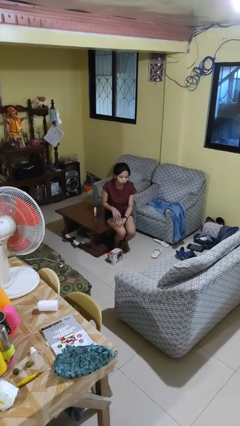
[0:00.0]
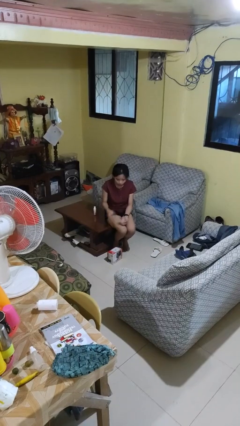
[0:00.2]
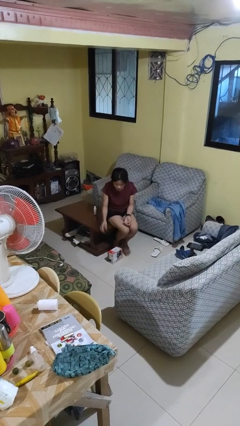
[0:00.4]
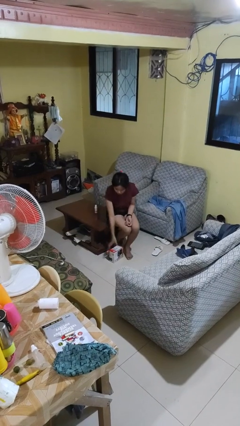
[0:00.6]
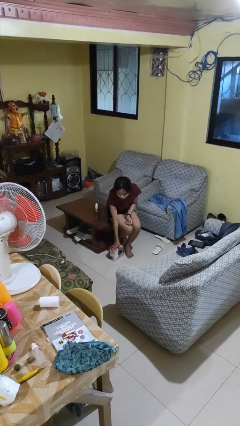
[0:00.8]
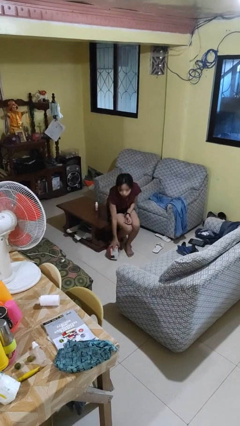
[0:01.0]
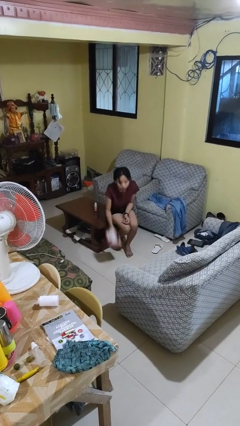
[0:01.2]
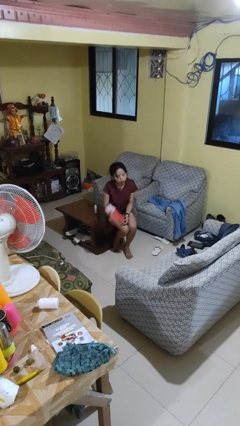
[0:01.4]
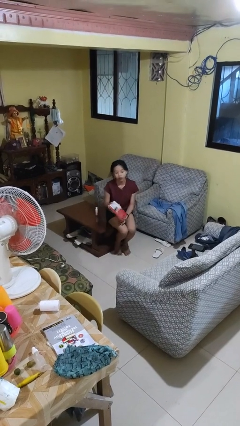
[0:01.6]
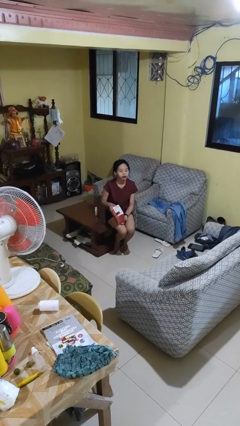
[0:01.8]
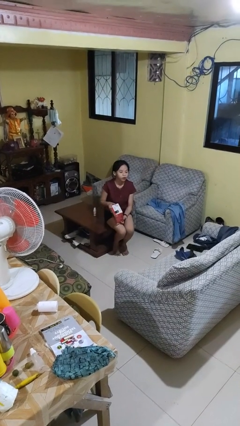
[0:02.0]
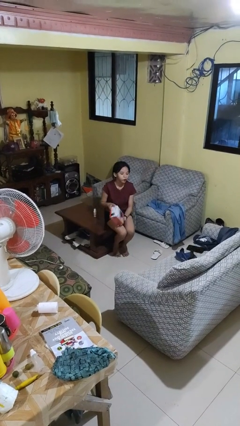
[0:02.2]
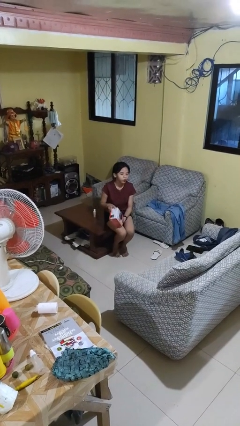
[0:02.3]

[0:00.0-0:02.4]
person picks up object from floor

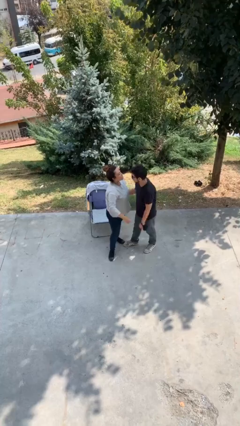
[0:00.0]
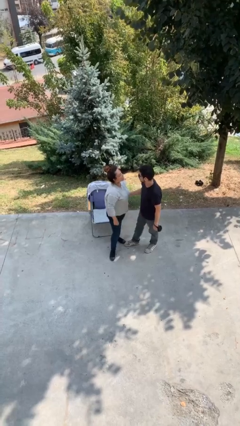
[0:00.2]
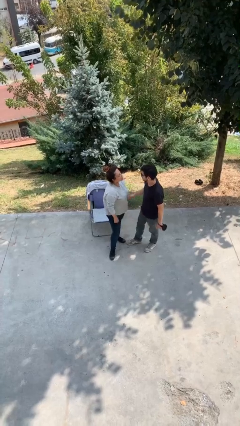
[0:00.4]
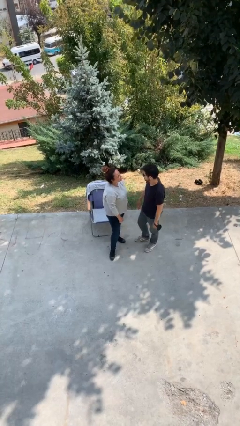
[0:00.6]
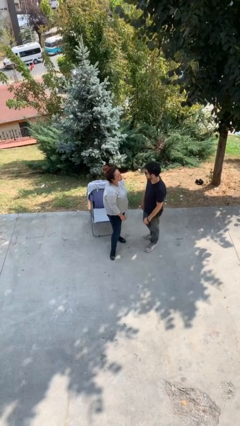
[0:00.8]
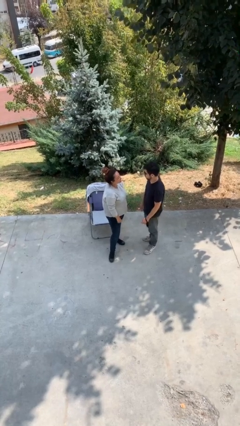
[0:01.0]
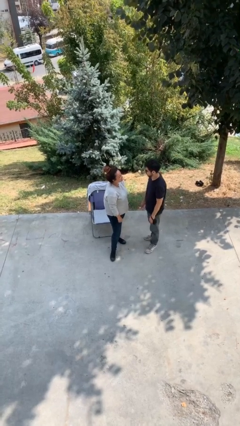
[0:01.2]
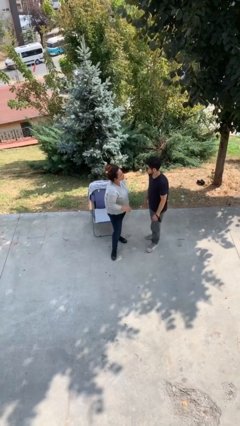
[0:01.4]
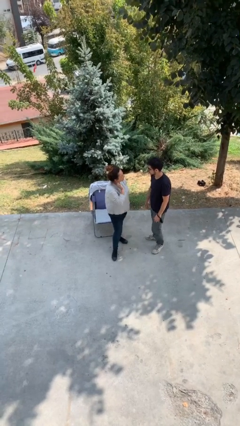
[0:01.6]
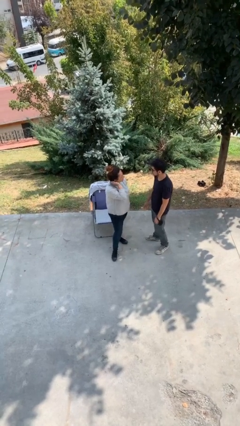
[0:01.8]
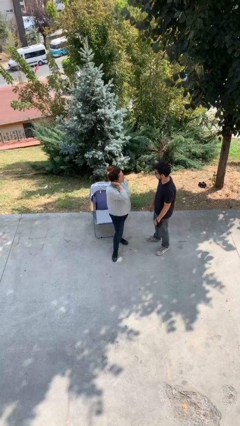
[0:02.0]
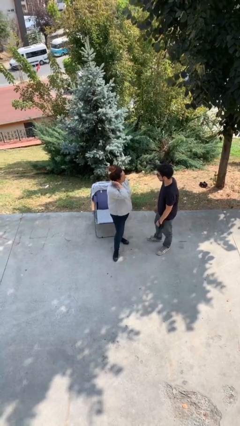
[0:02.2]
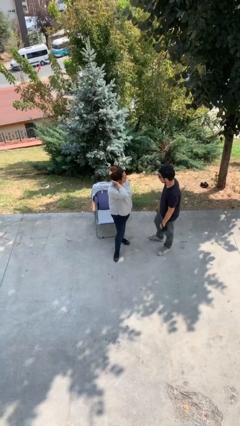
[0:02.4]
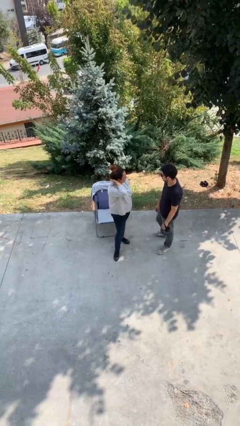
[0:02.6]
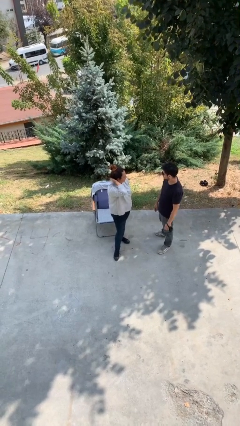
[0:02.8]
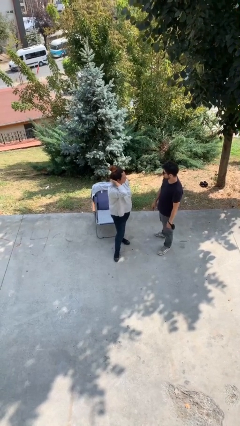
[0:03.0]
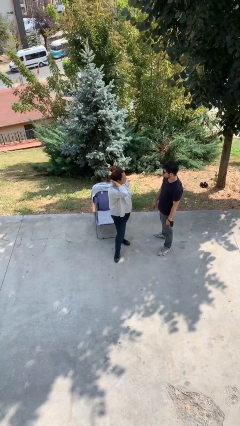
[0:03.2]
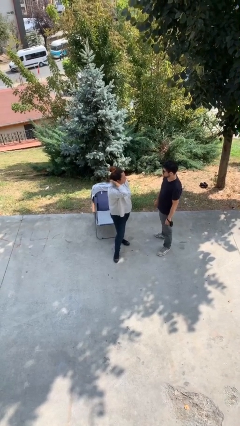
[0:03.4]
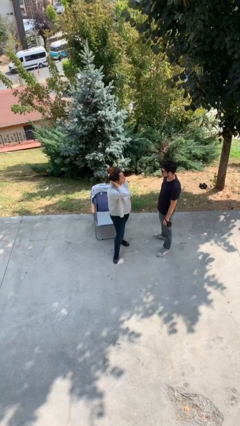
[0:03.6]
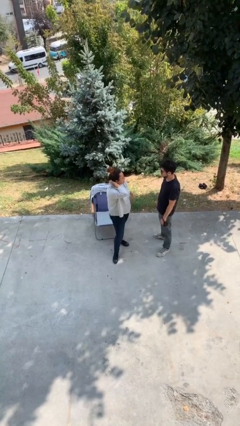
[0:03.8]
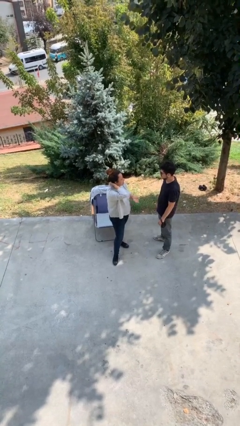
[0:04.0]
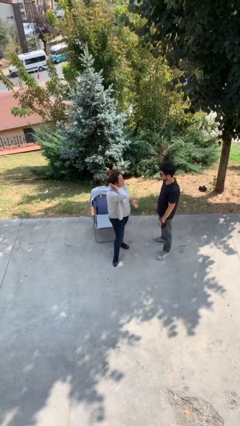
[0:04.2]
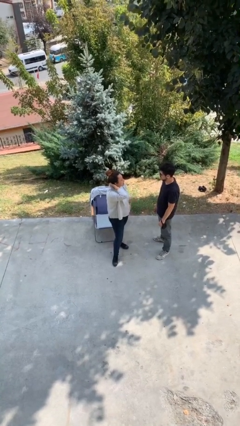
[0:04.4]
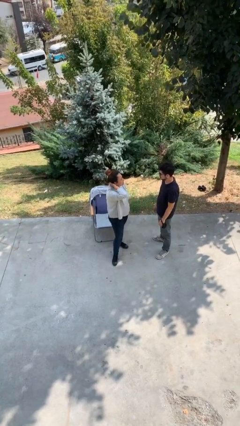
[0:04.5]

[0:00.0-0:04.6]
person talks to person

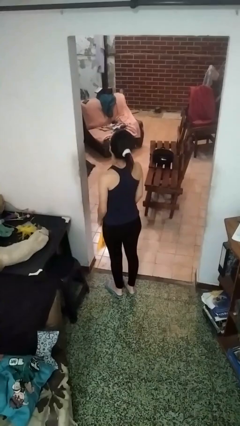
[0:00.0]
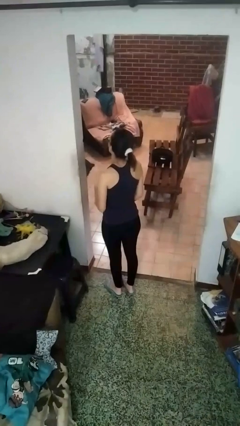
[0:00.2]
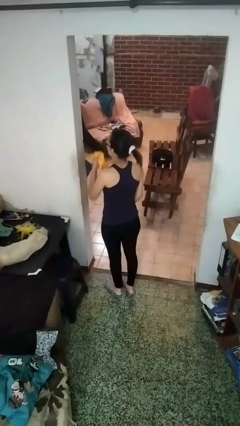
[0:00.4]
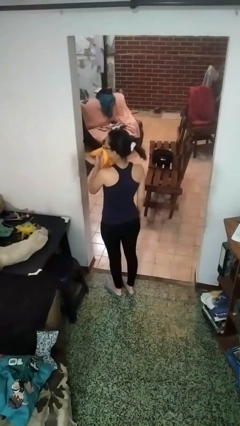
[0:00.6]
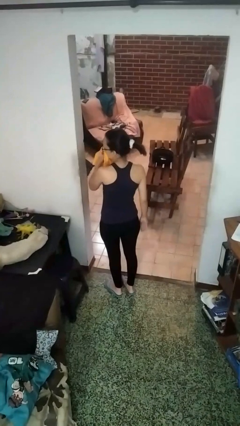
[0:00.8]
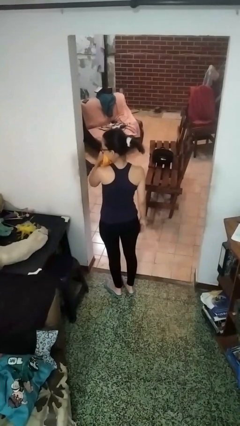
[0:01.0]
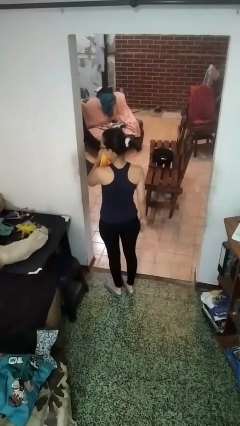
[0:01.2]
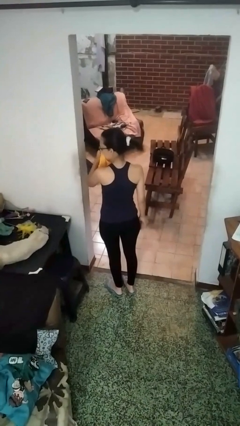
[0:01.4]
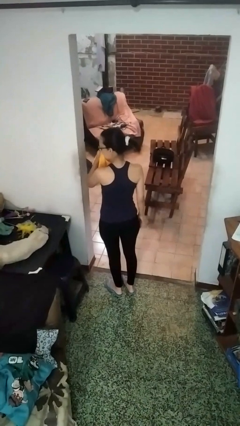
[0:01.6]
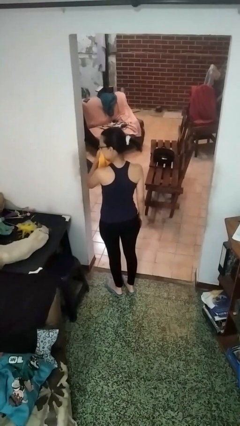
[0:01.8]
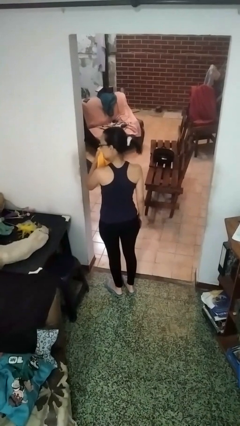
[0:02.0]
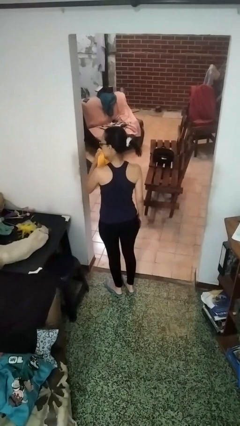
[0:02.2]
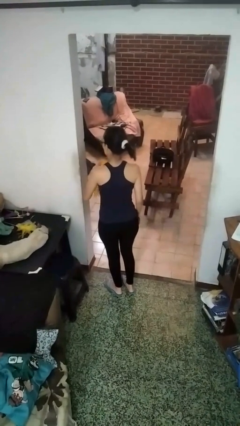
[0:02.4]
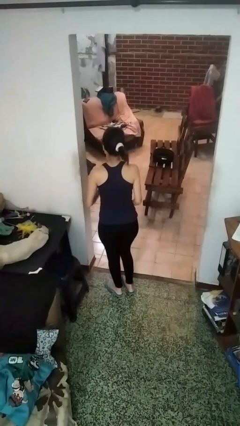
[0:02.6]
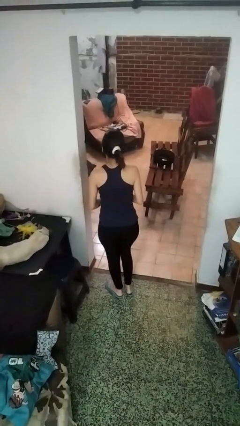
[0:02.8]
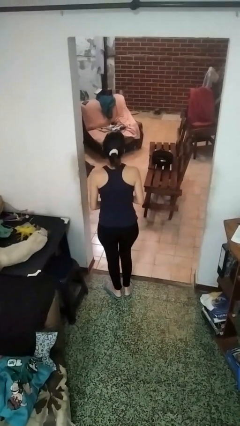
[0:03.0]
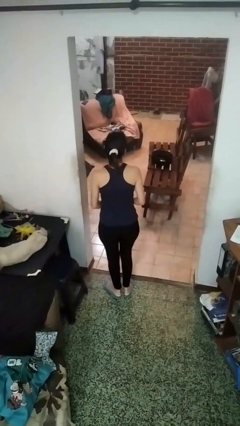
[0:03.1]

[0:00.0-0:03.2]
person blows nose

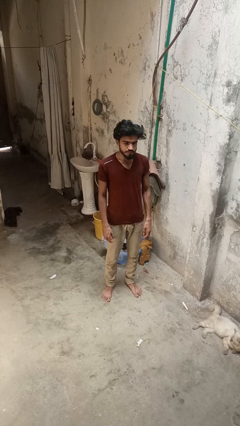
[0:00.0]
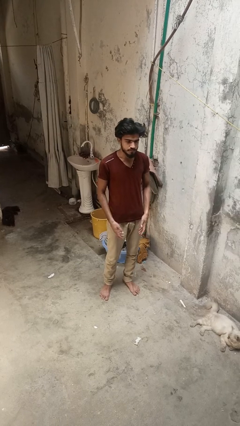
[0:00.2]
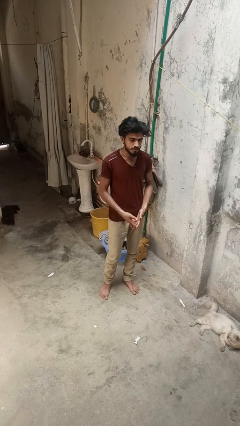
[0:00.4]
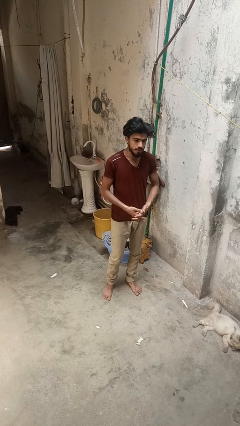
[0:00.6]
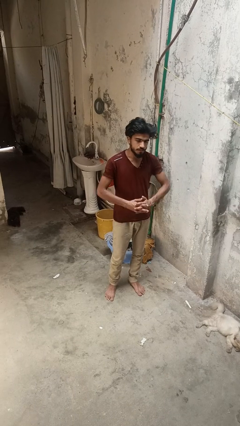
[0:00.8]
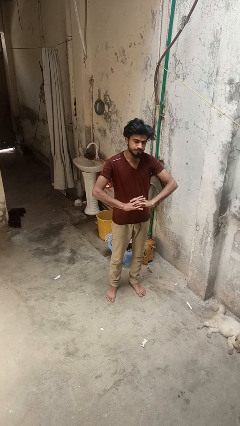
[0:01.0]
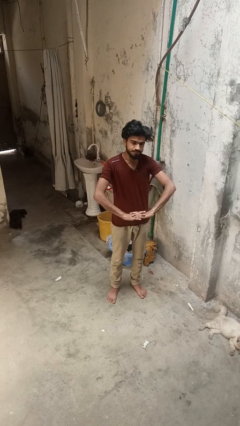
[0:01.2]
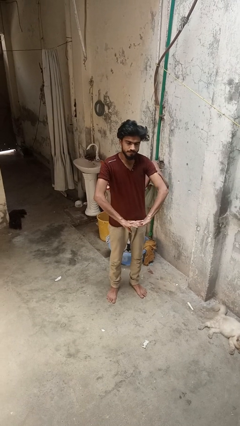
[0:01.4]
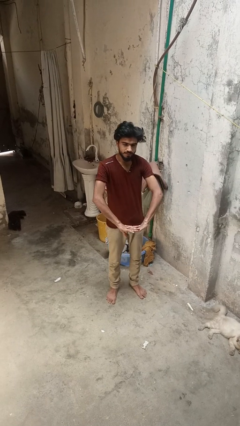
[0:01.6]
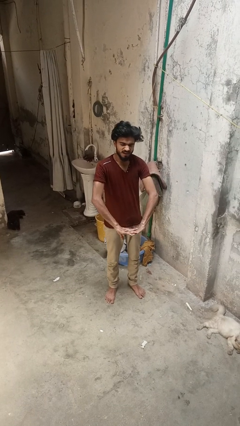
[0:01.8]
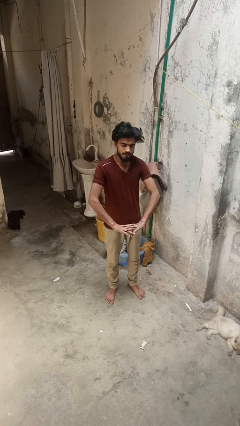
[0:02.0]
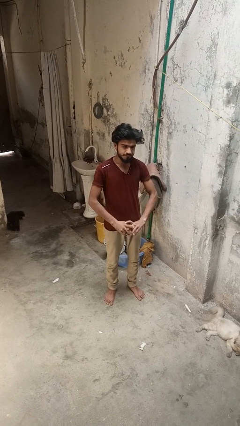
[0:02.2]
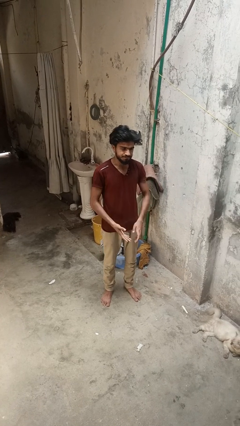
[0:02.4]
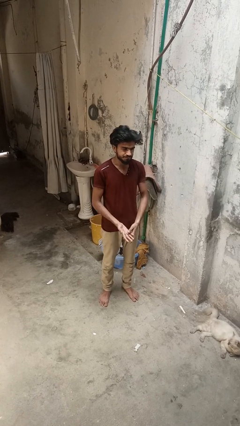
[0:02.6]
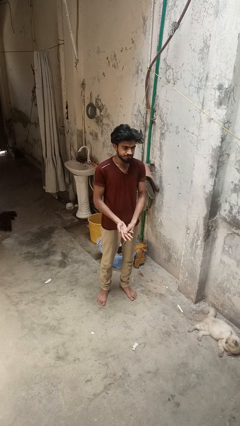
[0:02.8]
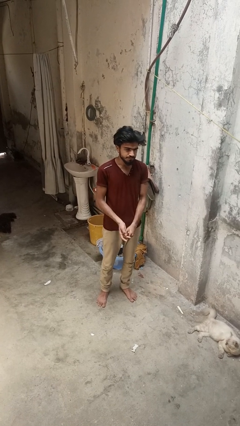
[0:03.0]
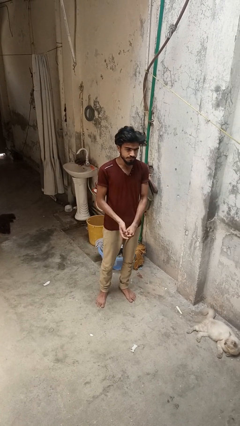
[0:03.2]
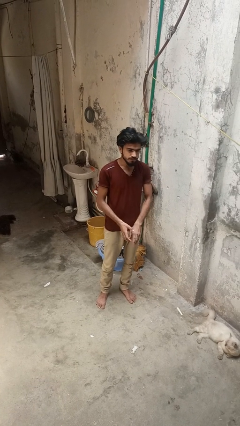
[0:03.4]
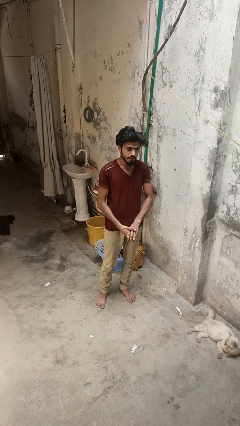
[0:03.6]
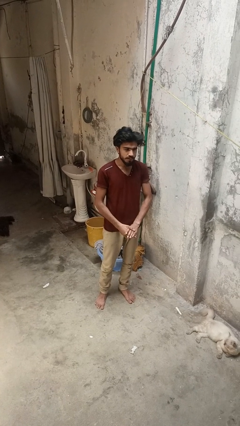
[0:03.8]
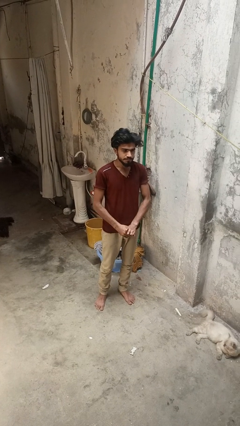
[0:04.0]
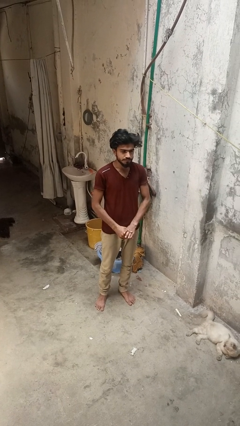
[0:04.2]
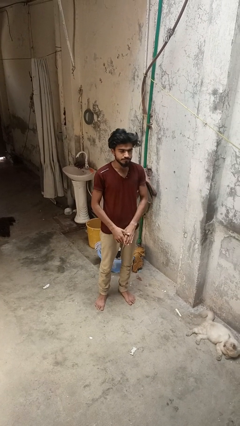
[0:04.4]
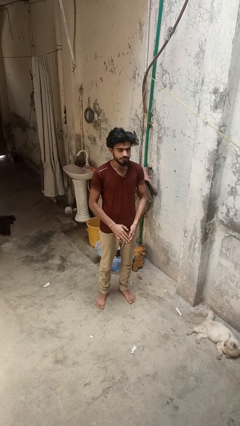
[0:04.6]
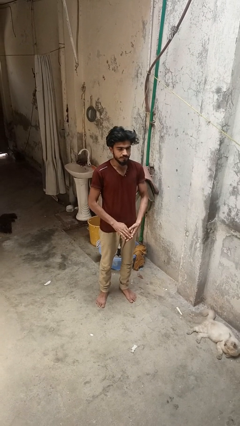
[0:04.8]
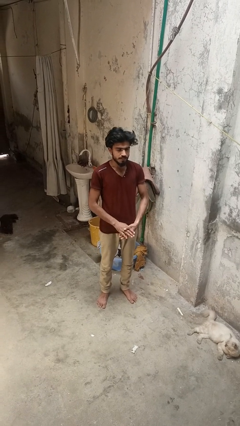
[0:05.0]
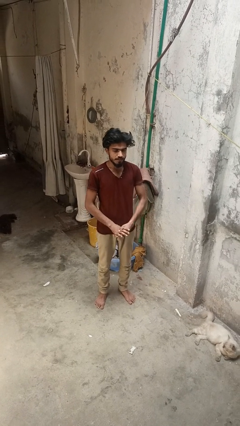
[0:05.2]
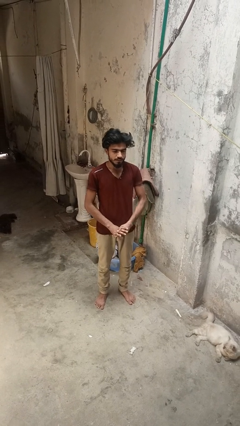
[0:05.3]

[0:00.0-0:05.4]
person cracks knuckles

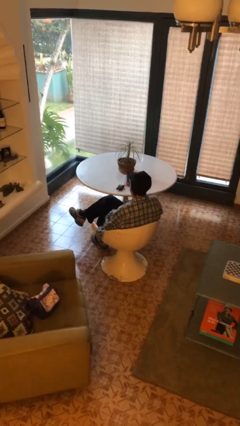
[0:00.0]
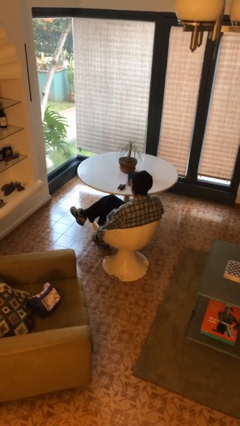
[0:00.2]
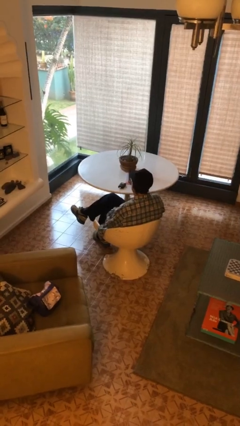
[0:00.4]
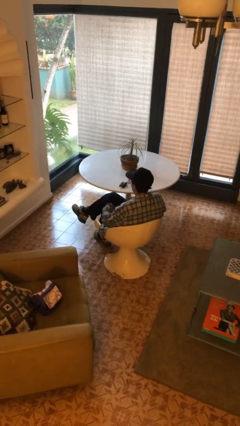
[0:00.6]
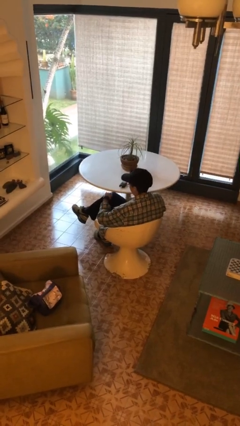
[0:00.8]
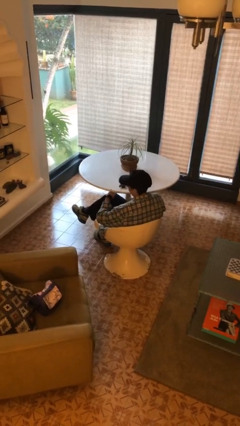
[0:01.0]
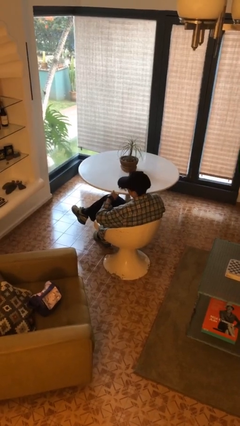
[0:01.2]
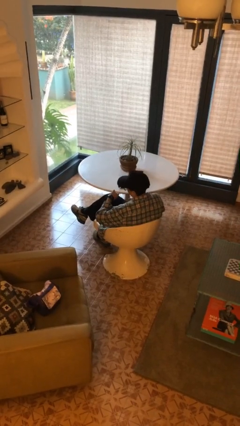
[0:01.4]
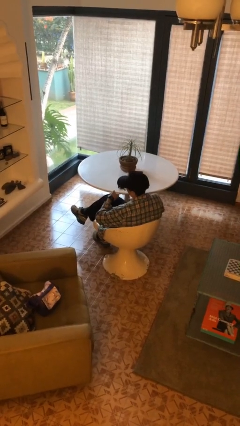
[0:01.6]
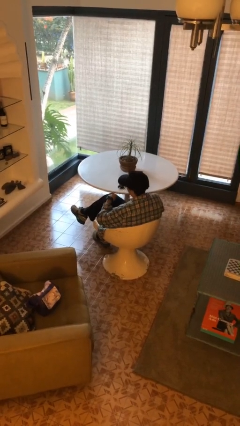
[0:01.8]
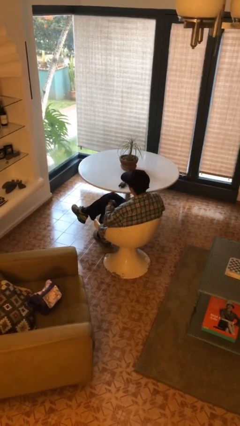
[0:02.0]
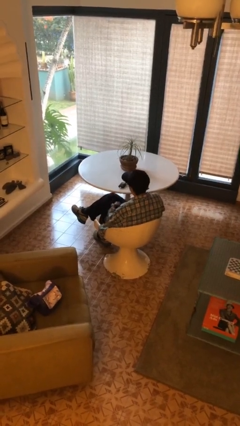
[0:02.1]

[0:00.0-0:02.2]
person looks at wristwatch
